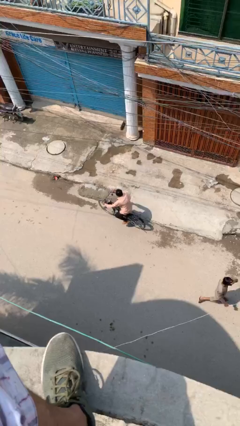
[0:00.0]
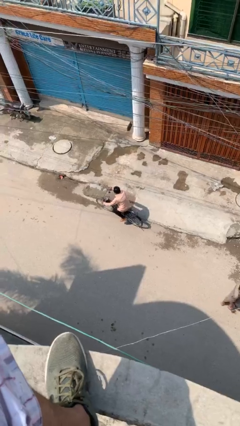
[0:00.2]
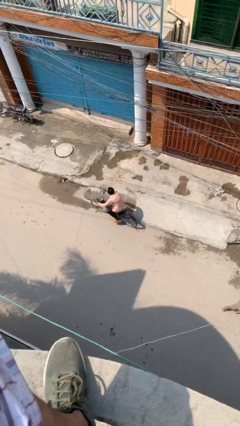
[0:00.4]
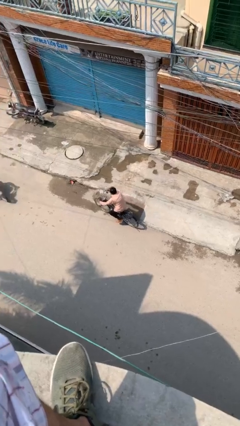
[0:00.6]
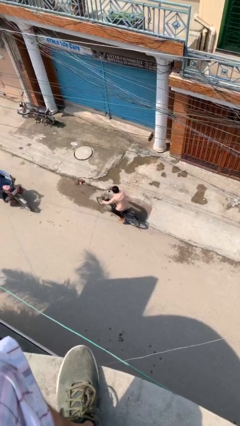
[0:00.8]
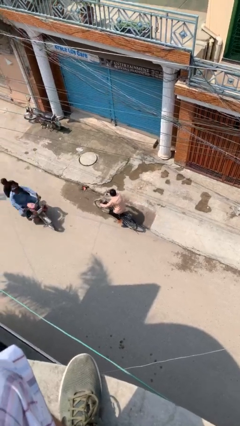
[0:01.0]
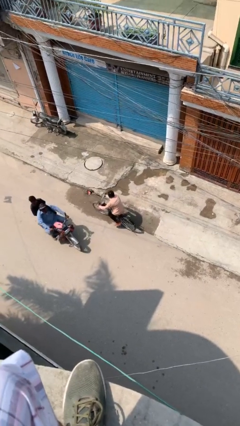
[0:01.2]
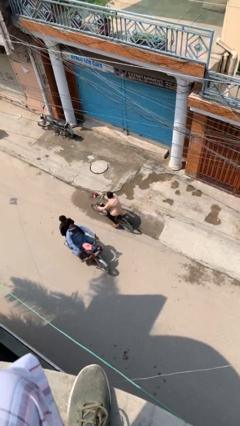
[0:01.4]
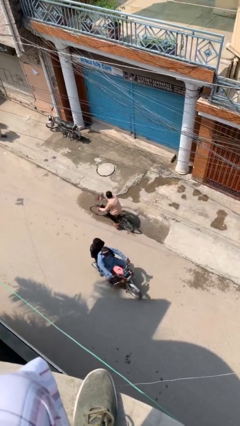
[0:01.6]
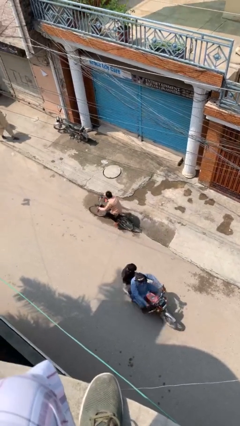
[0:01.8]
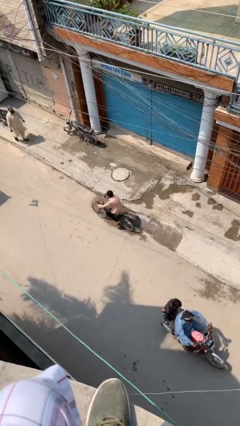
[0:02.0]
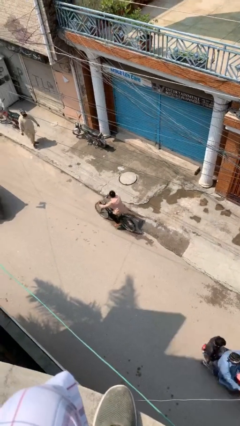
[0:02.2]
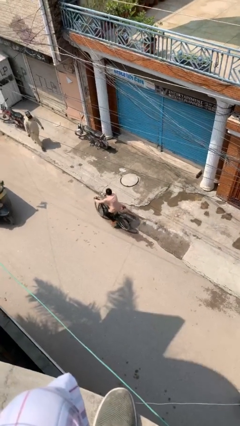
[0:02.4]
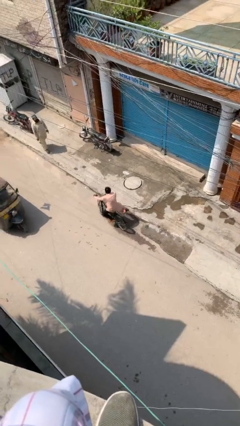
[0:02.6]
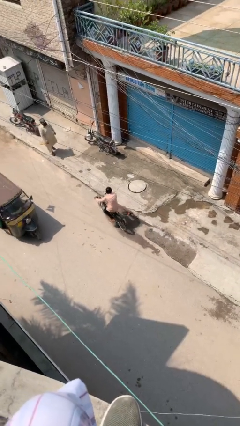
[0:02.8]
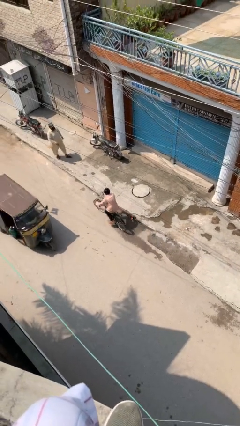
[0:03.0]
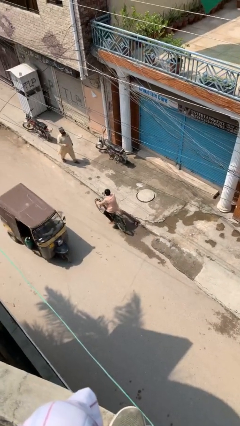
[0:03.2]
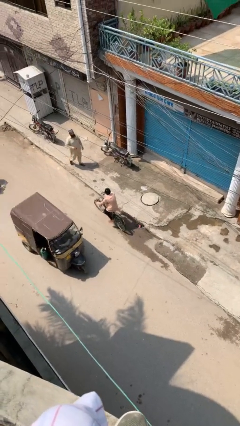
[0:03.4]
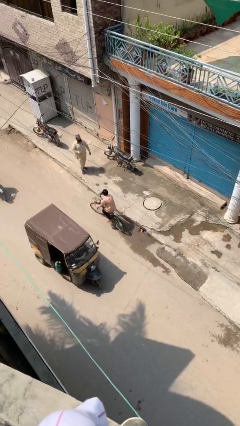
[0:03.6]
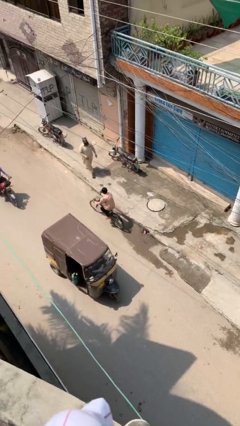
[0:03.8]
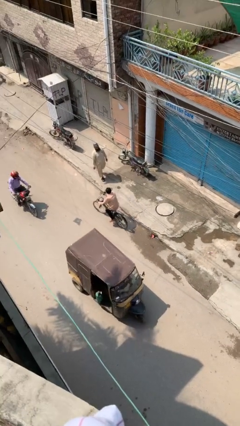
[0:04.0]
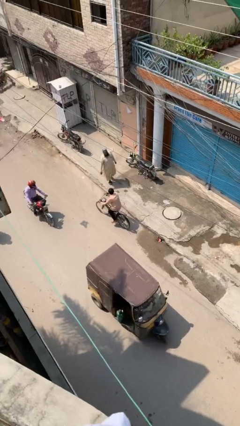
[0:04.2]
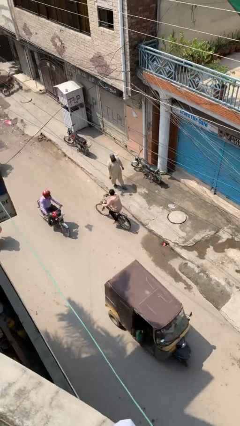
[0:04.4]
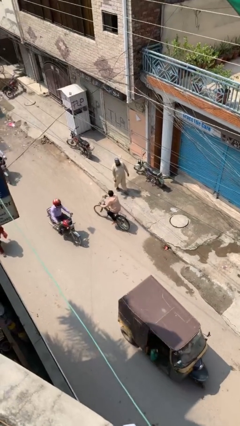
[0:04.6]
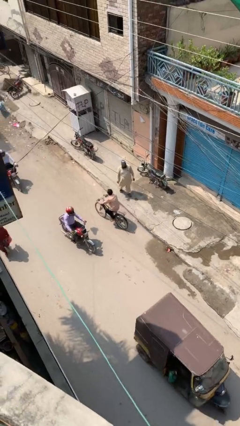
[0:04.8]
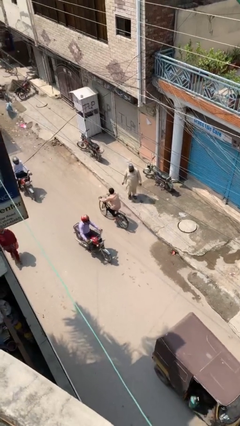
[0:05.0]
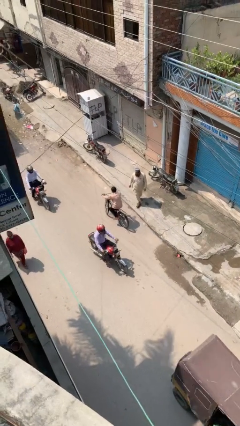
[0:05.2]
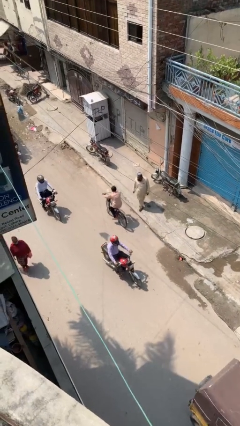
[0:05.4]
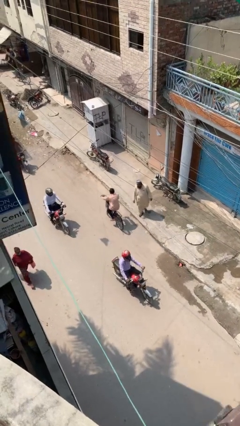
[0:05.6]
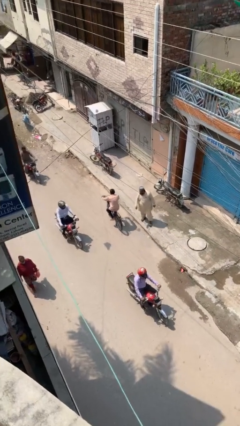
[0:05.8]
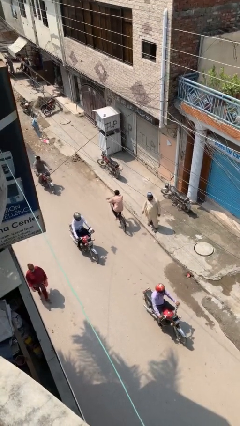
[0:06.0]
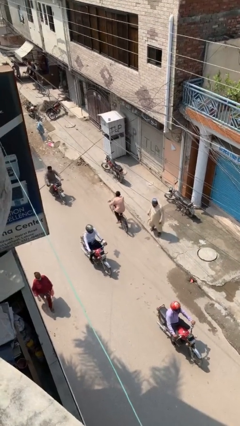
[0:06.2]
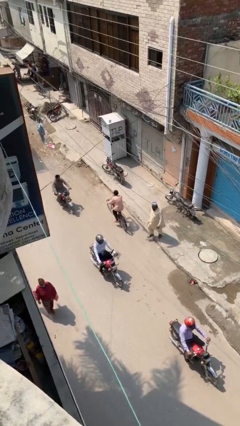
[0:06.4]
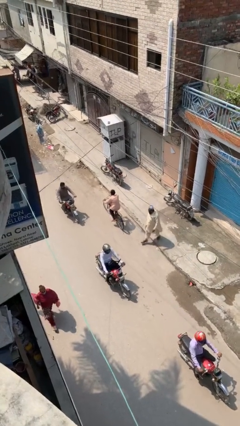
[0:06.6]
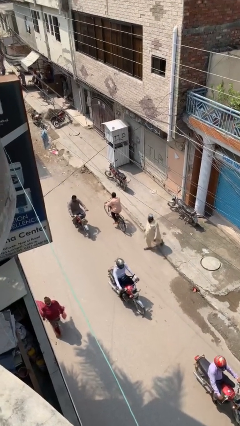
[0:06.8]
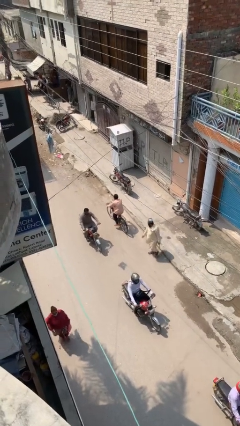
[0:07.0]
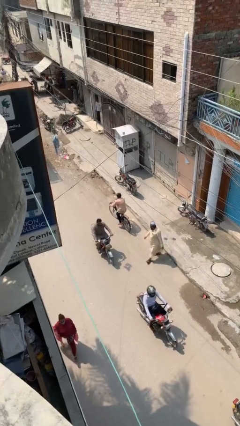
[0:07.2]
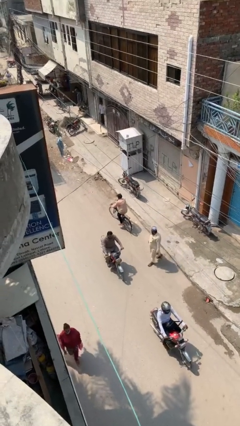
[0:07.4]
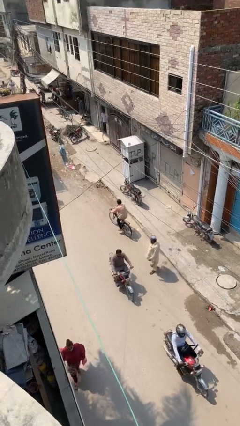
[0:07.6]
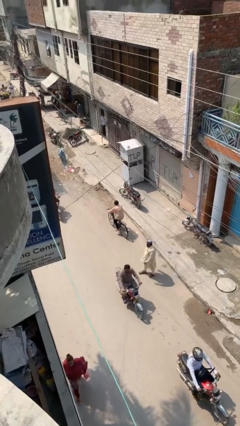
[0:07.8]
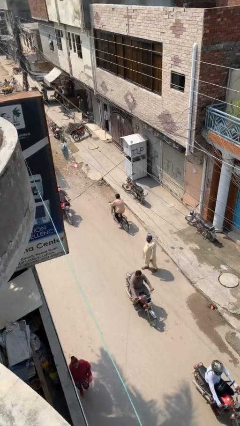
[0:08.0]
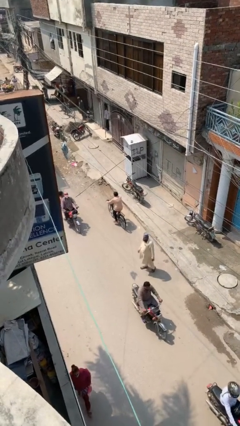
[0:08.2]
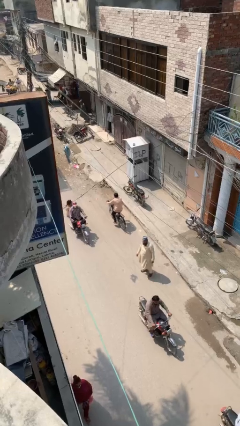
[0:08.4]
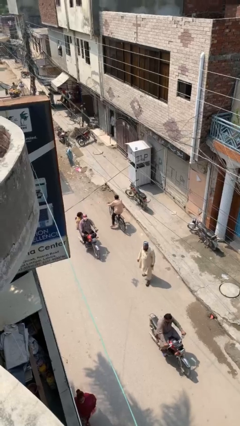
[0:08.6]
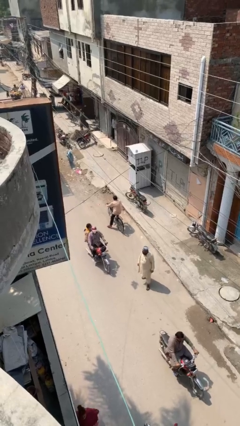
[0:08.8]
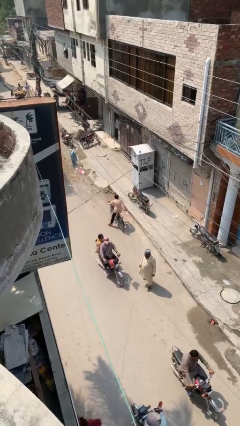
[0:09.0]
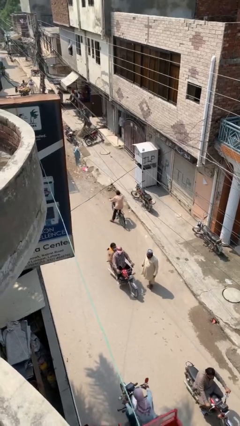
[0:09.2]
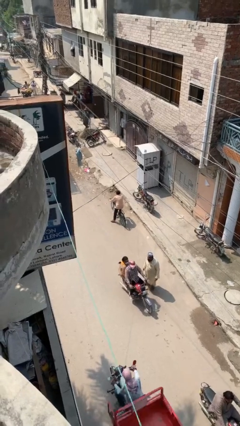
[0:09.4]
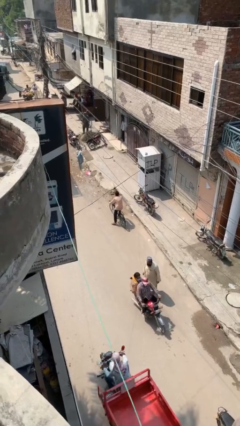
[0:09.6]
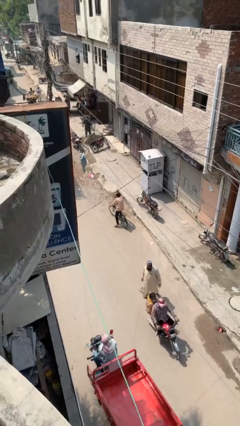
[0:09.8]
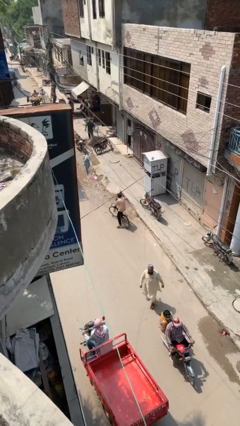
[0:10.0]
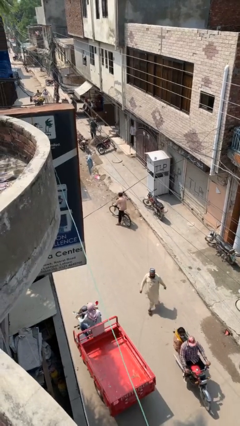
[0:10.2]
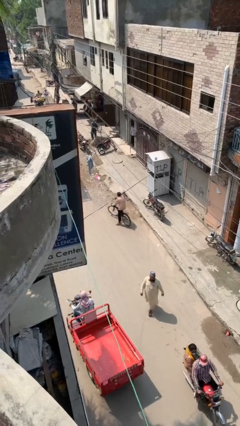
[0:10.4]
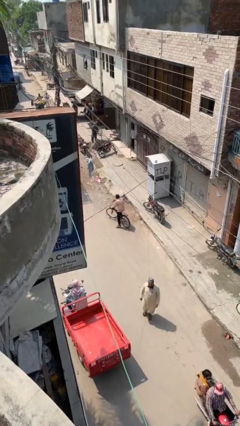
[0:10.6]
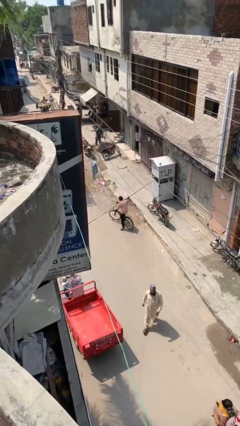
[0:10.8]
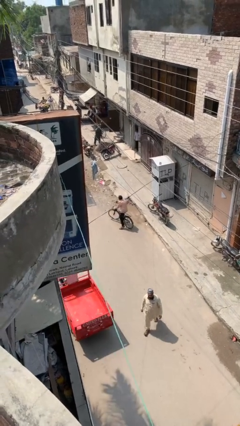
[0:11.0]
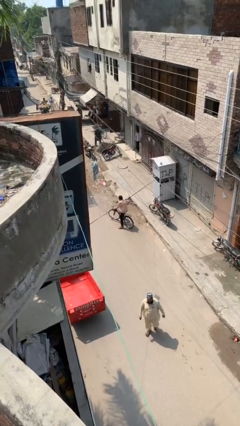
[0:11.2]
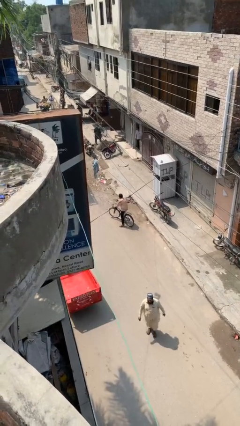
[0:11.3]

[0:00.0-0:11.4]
person rides bicycle

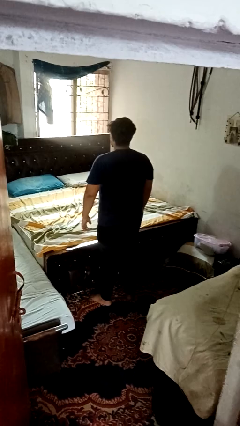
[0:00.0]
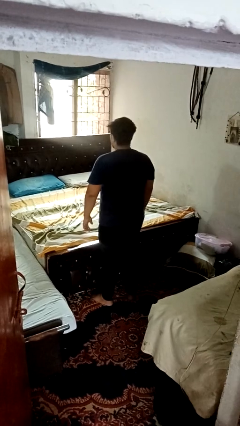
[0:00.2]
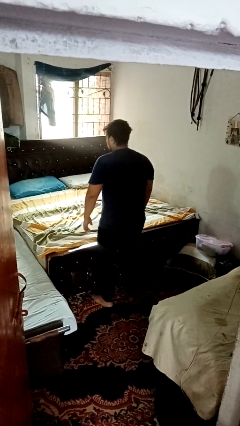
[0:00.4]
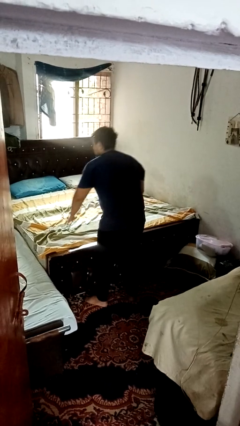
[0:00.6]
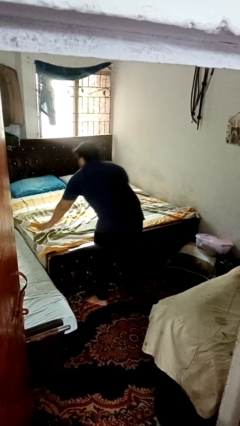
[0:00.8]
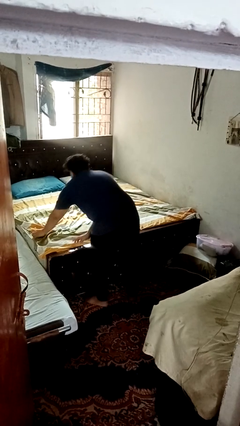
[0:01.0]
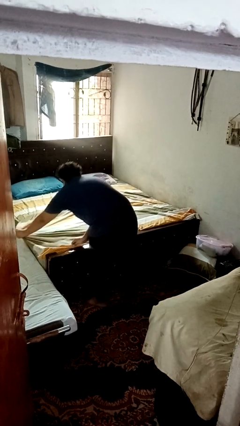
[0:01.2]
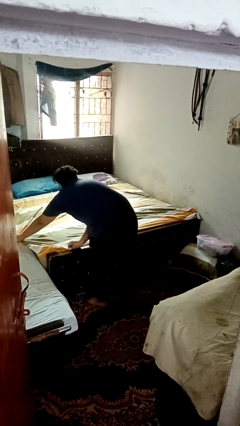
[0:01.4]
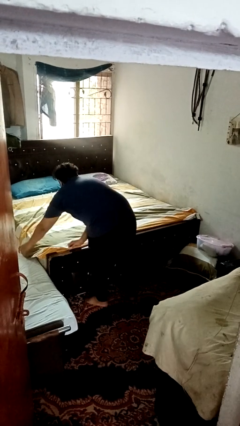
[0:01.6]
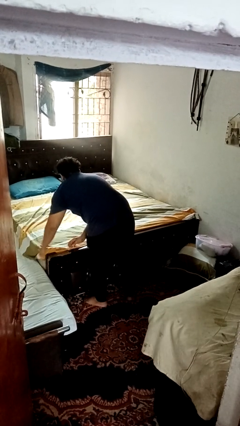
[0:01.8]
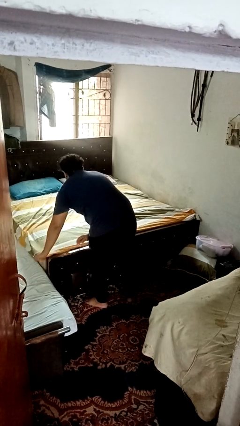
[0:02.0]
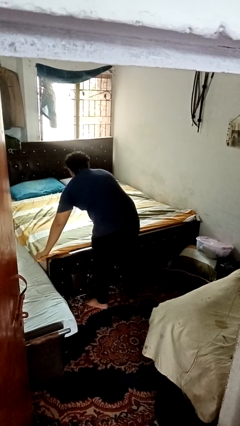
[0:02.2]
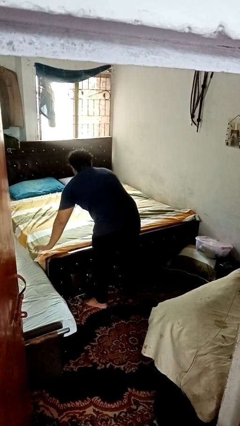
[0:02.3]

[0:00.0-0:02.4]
person makes bed

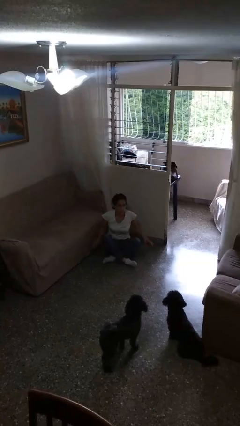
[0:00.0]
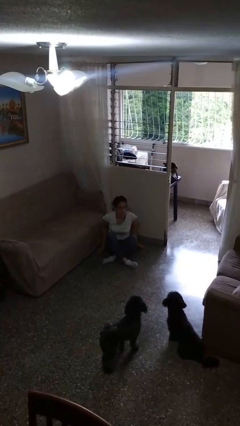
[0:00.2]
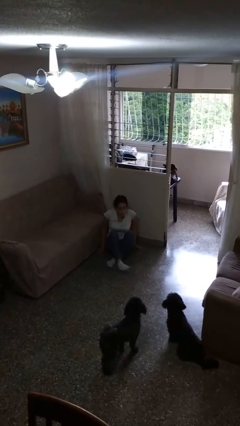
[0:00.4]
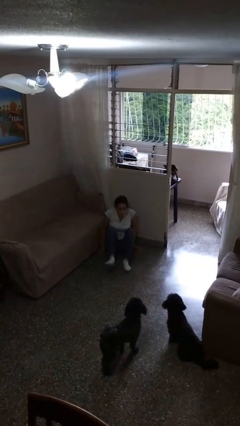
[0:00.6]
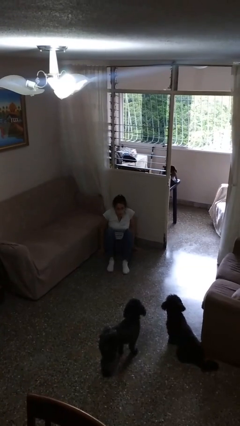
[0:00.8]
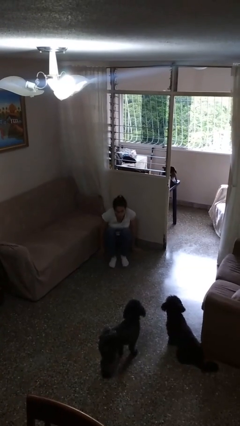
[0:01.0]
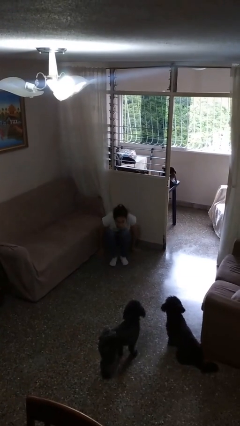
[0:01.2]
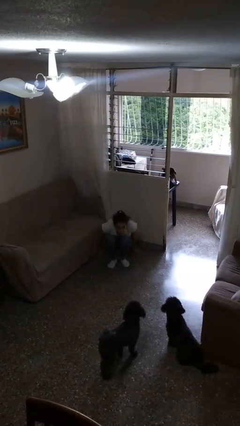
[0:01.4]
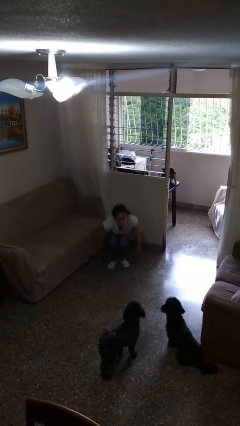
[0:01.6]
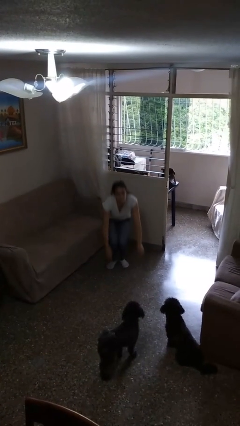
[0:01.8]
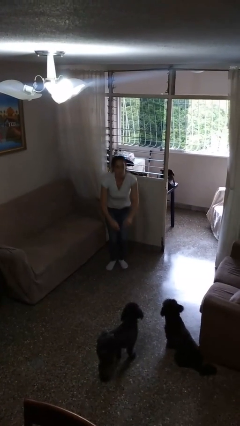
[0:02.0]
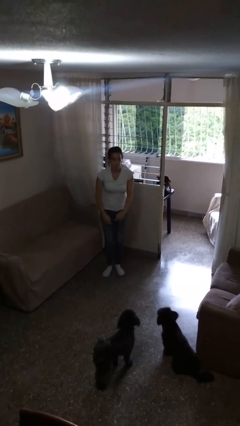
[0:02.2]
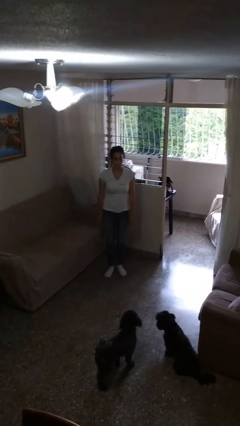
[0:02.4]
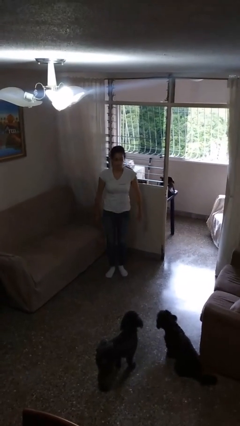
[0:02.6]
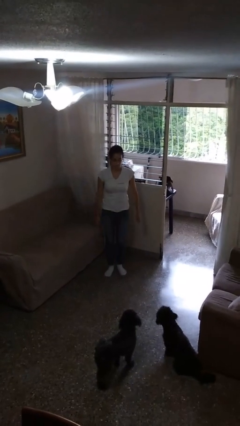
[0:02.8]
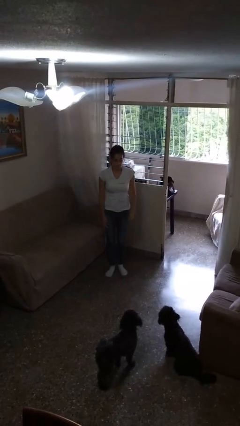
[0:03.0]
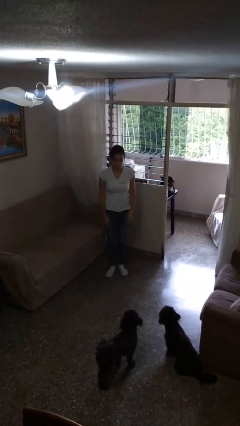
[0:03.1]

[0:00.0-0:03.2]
person stands up from floor

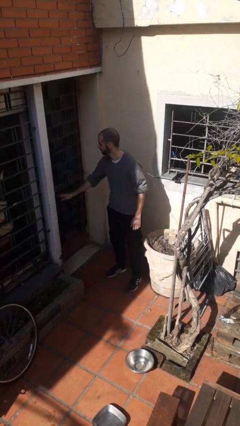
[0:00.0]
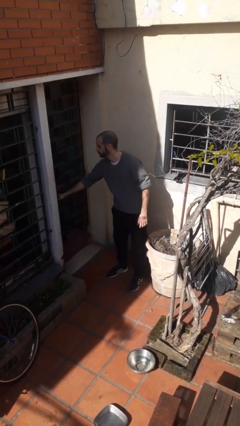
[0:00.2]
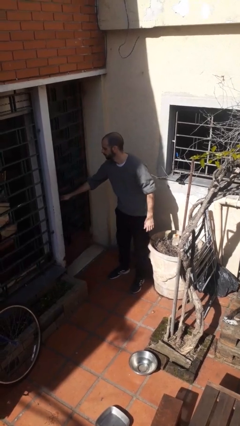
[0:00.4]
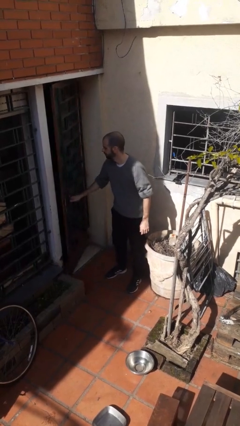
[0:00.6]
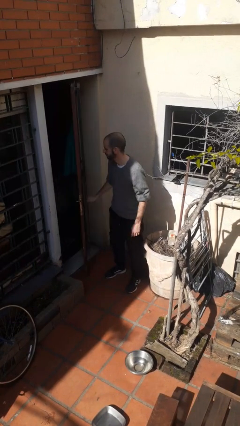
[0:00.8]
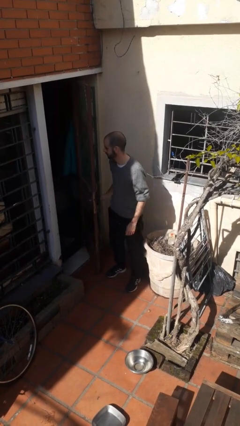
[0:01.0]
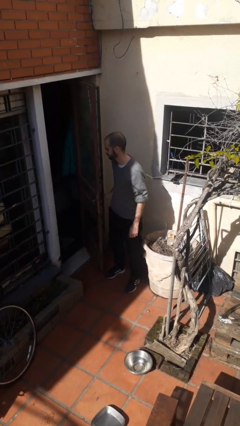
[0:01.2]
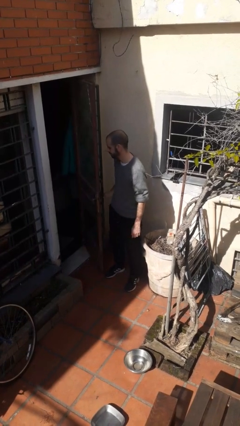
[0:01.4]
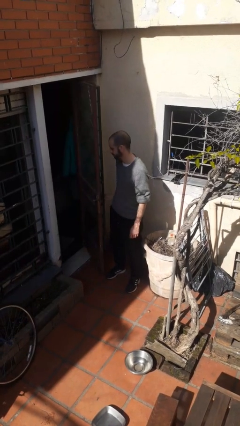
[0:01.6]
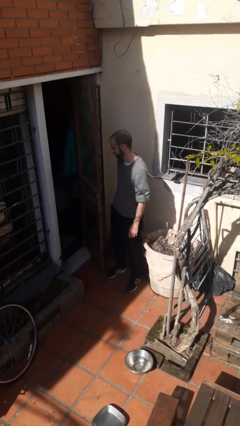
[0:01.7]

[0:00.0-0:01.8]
person opens facility door
